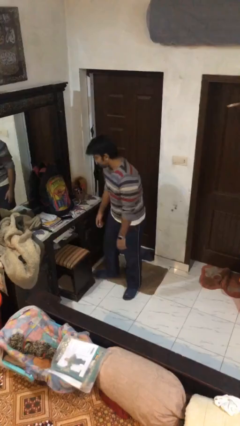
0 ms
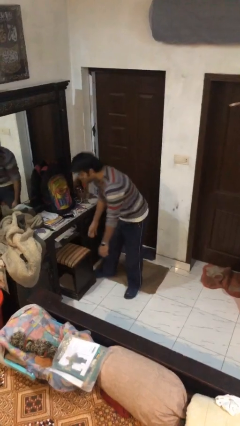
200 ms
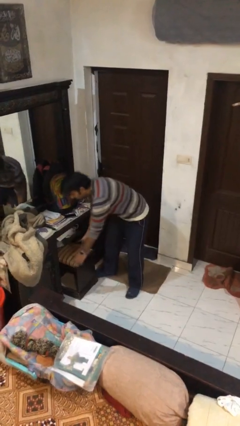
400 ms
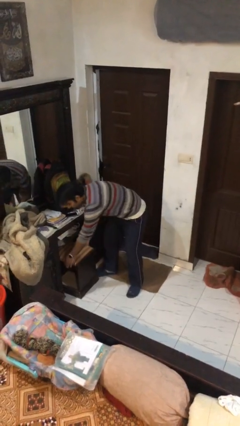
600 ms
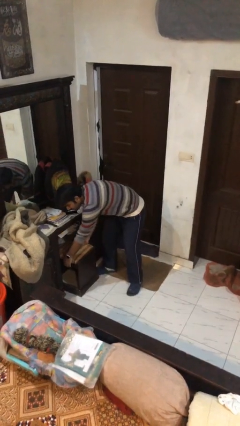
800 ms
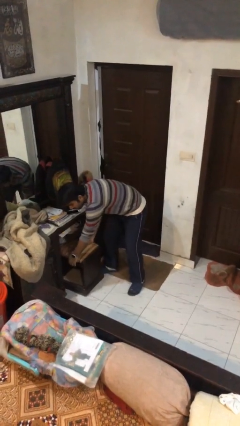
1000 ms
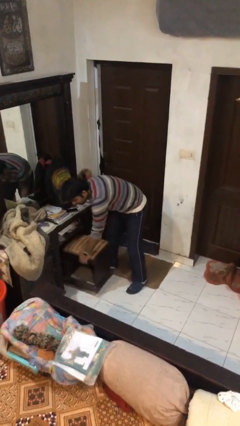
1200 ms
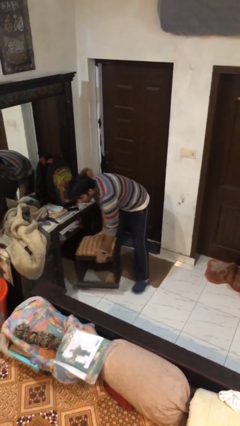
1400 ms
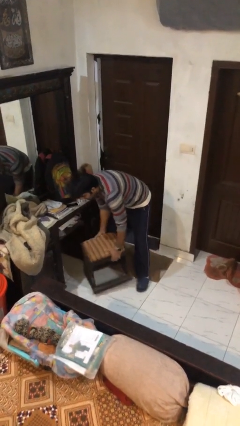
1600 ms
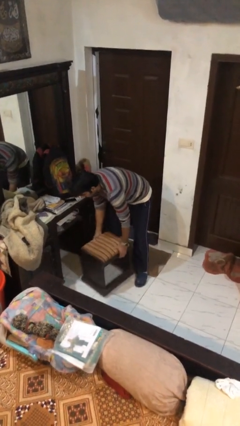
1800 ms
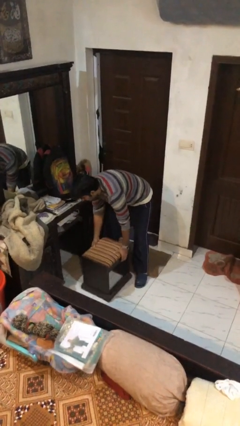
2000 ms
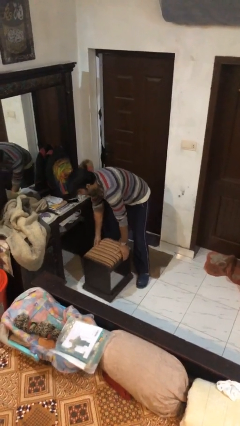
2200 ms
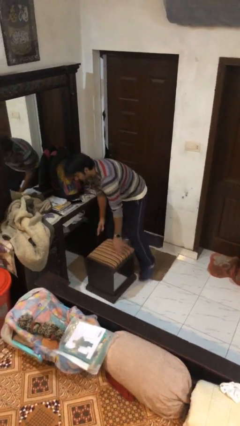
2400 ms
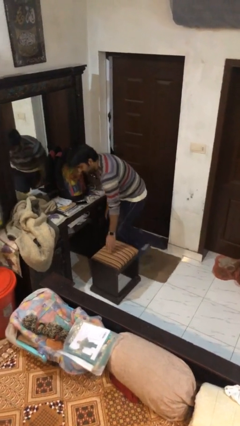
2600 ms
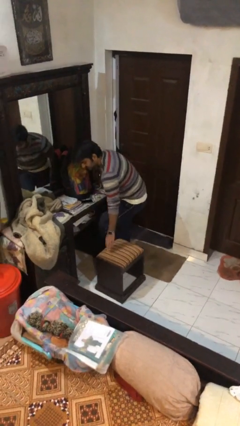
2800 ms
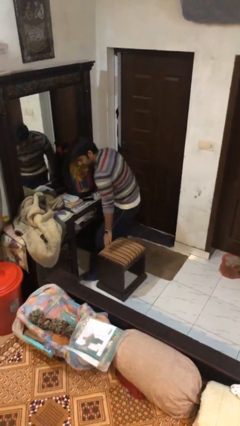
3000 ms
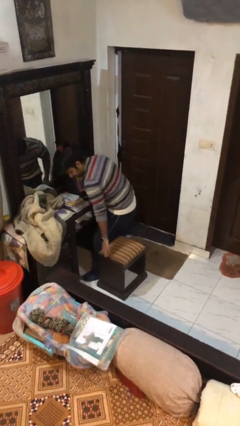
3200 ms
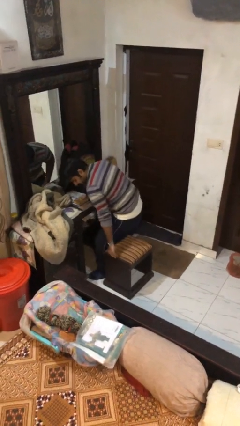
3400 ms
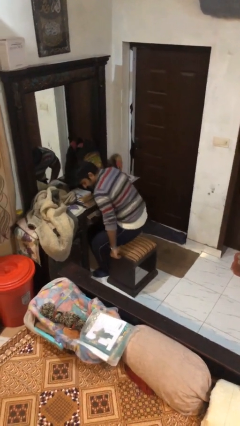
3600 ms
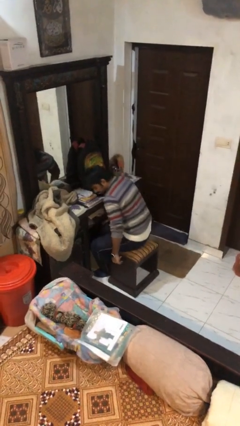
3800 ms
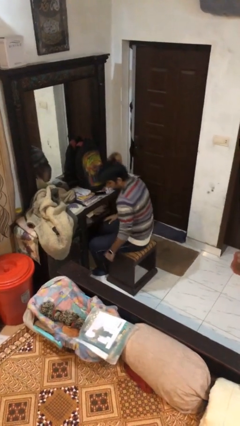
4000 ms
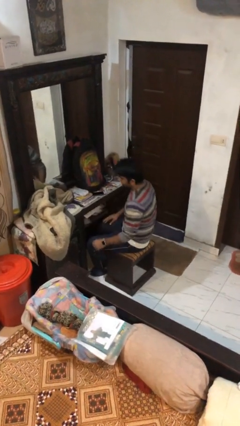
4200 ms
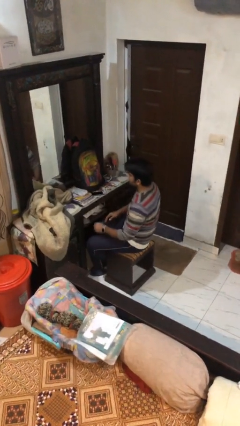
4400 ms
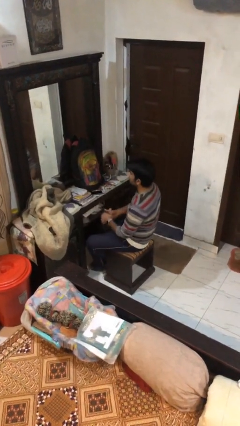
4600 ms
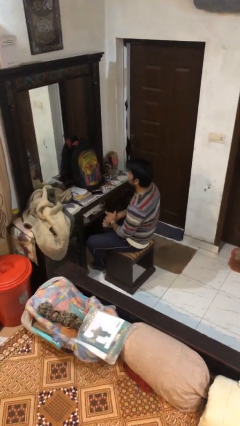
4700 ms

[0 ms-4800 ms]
person sits down

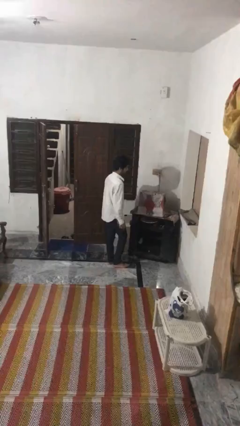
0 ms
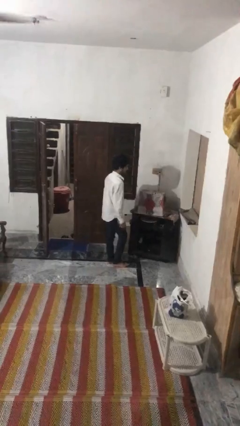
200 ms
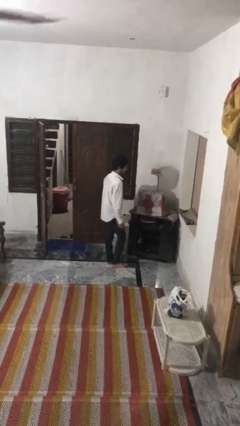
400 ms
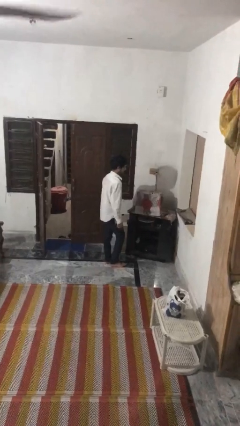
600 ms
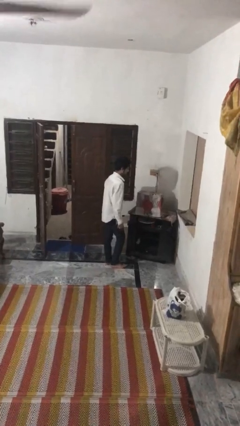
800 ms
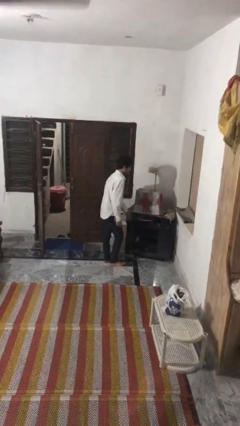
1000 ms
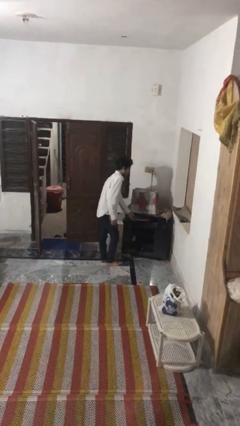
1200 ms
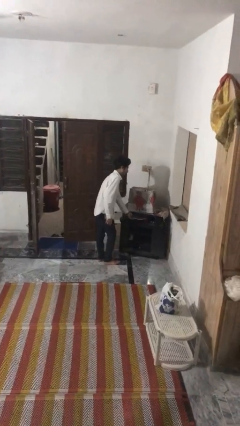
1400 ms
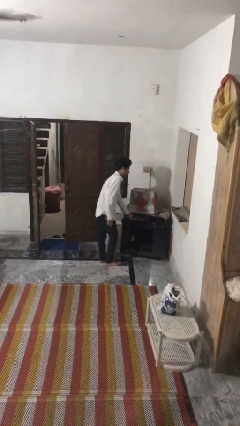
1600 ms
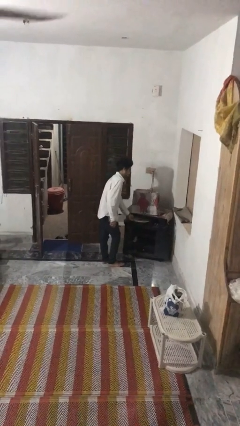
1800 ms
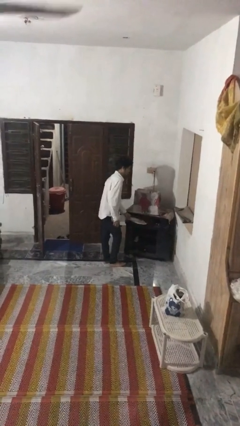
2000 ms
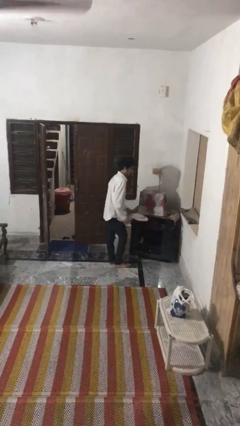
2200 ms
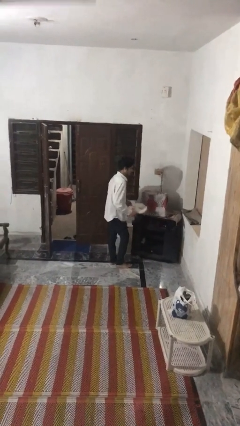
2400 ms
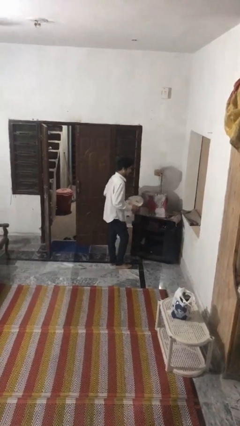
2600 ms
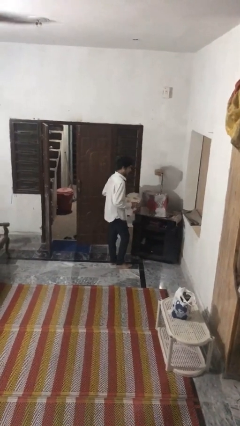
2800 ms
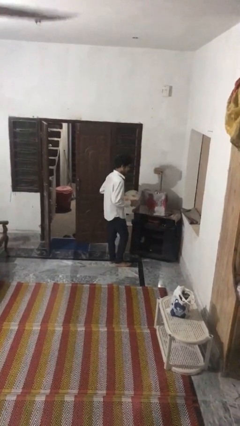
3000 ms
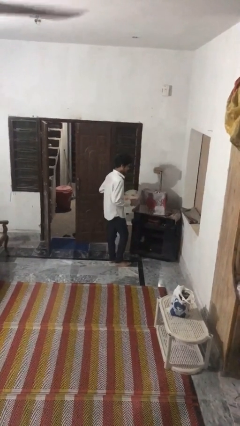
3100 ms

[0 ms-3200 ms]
person picks up object from cabinet

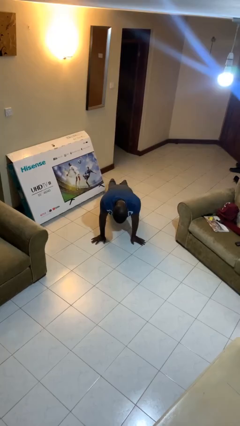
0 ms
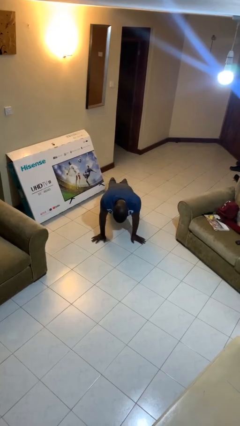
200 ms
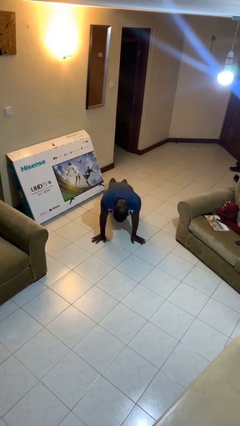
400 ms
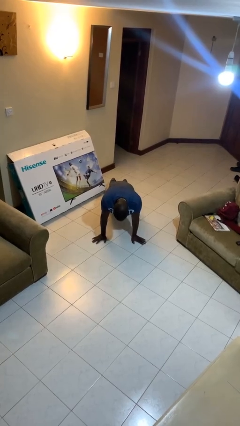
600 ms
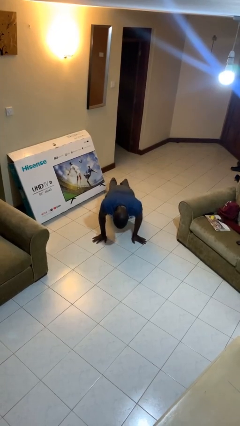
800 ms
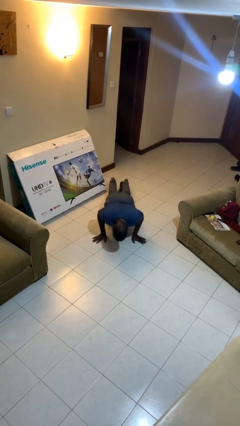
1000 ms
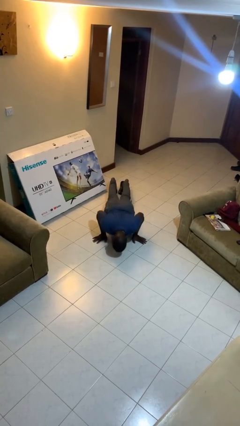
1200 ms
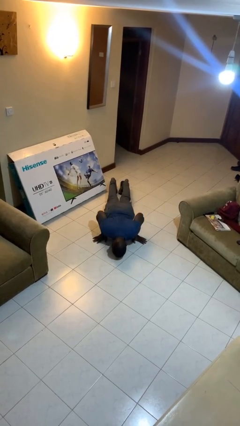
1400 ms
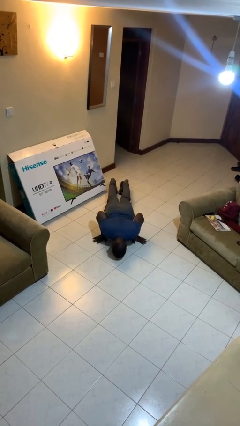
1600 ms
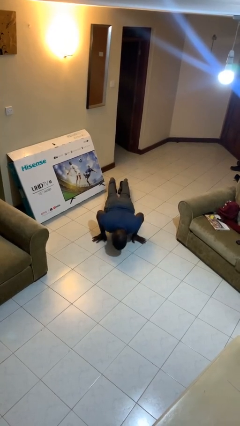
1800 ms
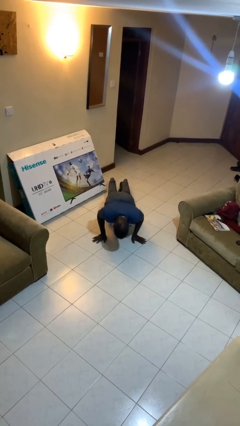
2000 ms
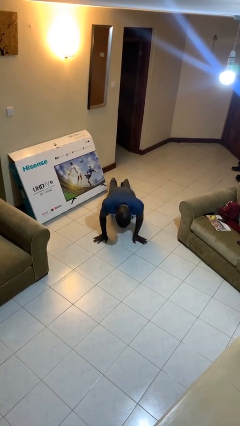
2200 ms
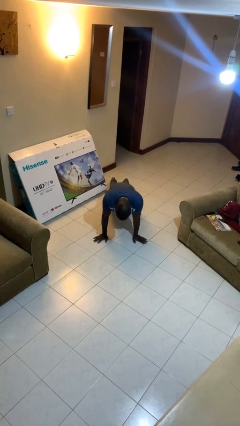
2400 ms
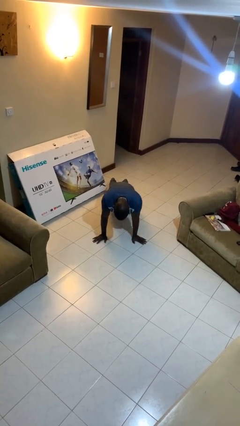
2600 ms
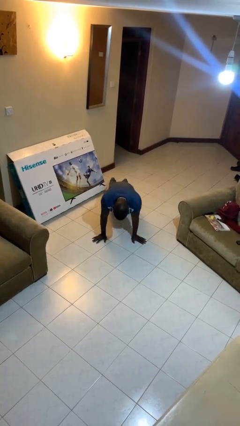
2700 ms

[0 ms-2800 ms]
person exercises with pushup

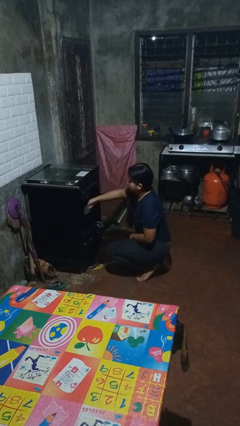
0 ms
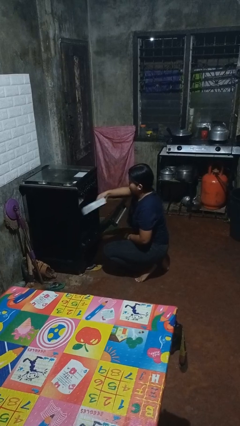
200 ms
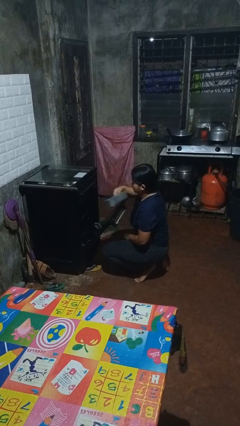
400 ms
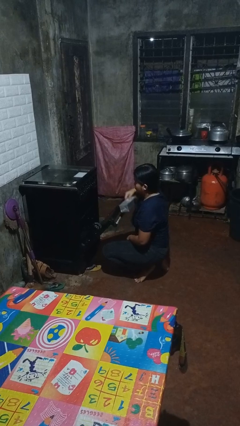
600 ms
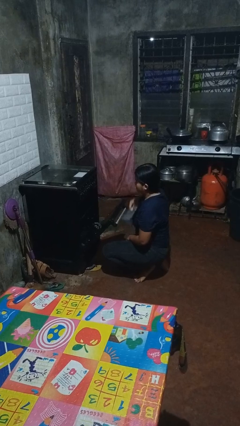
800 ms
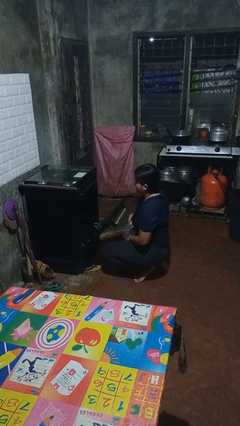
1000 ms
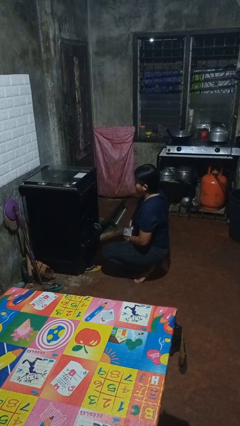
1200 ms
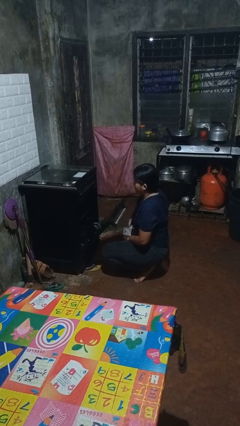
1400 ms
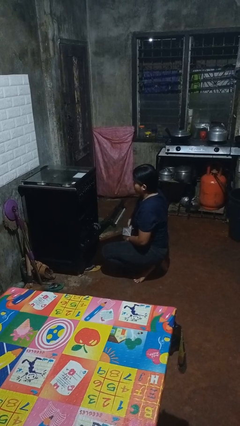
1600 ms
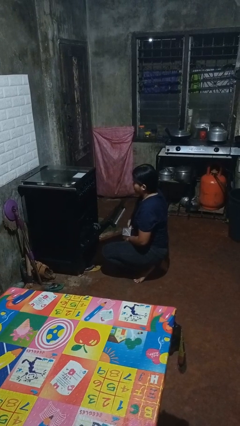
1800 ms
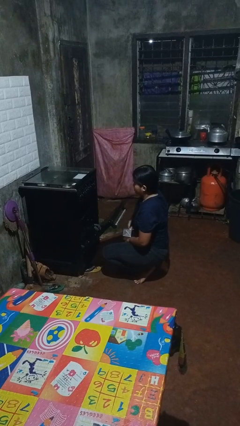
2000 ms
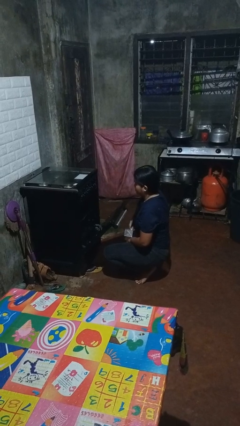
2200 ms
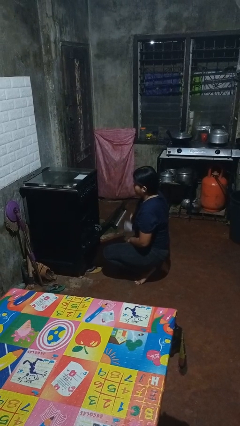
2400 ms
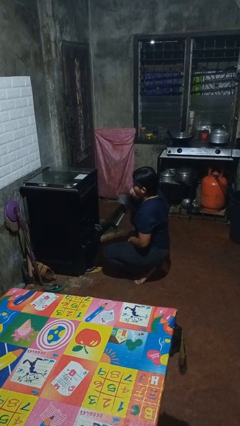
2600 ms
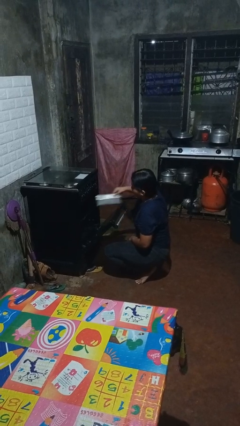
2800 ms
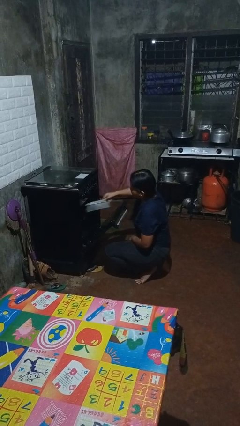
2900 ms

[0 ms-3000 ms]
person takes object from oven

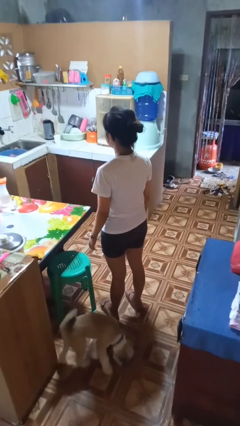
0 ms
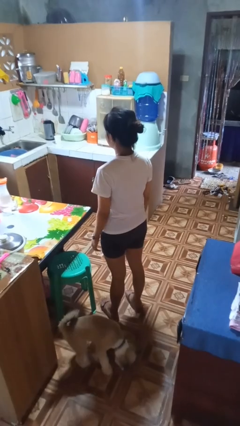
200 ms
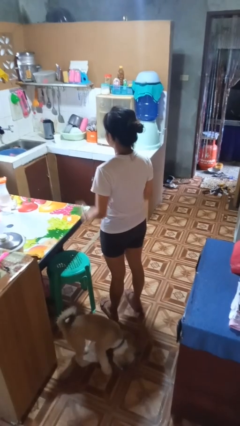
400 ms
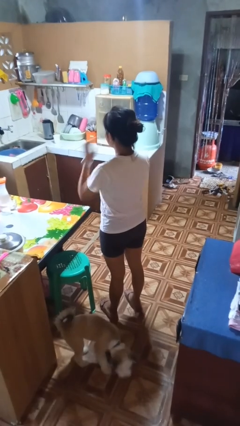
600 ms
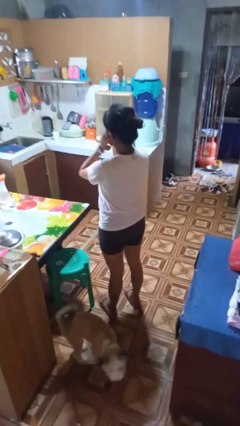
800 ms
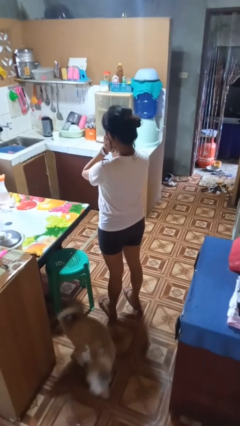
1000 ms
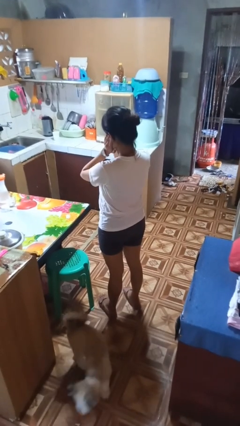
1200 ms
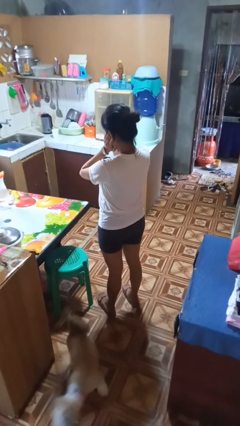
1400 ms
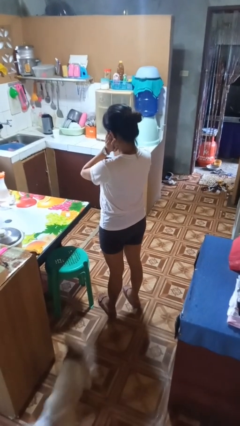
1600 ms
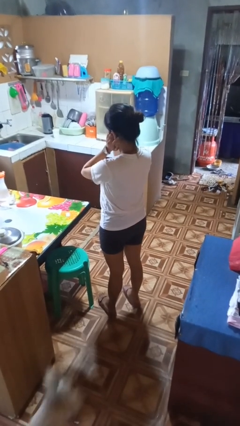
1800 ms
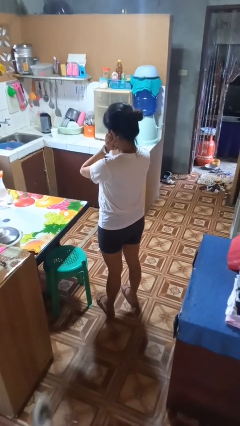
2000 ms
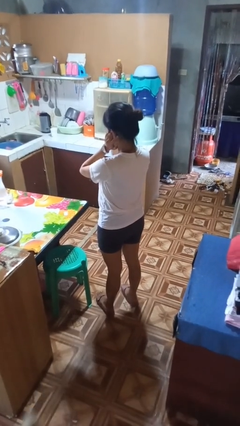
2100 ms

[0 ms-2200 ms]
person puts fingers in ear

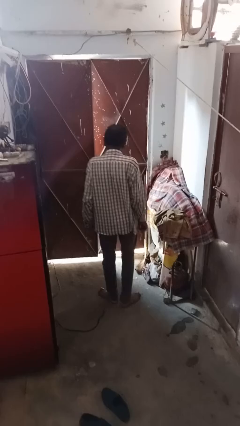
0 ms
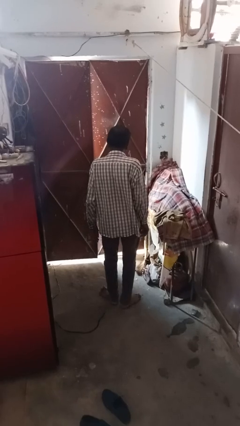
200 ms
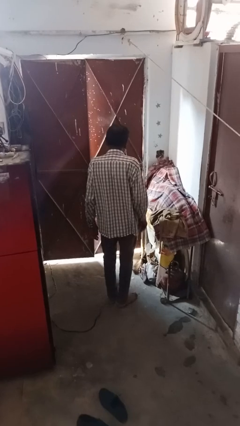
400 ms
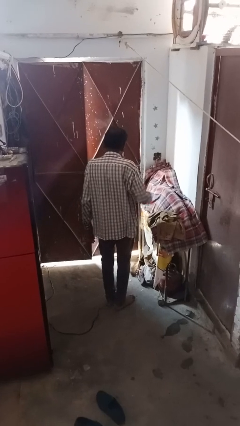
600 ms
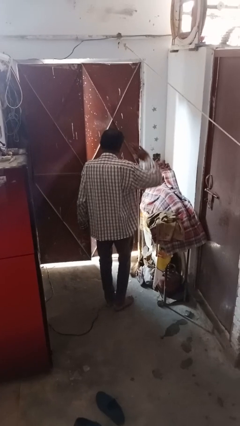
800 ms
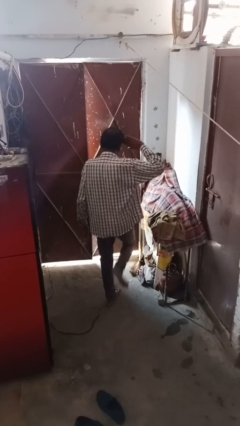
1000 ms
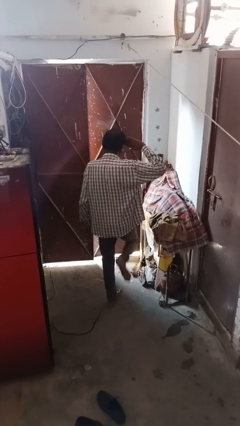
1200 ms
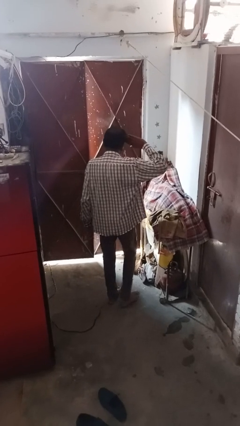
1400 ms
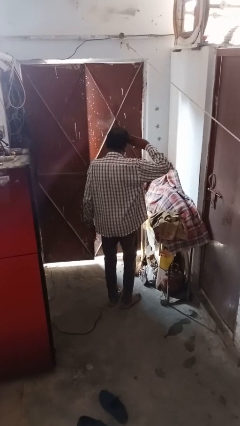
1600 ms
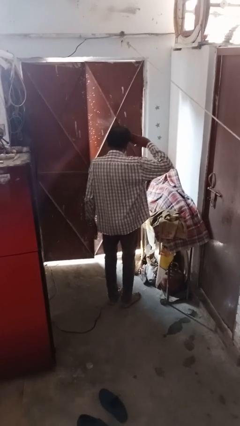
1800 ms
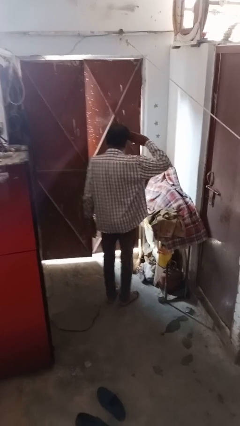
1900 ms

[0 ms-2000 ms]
person salutes
